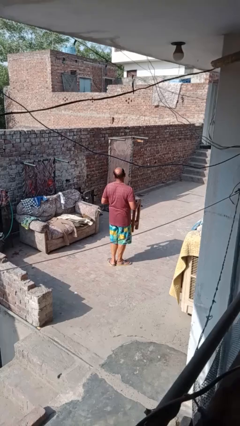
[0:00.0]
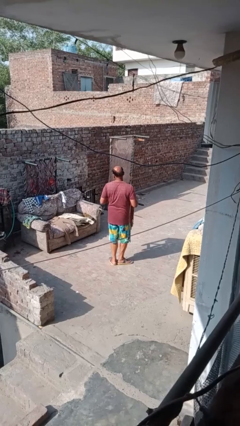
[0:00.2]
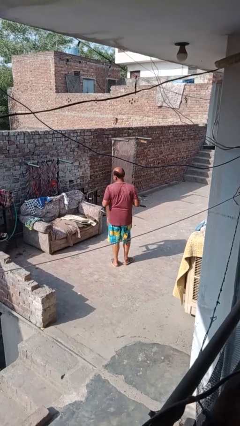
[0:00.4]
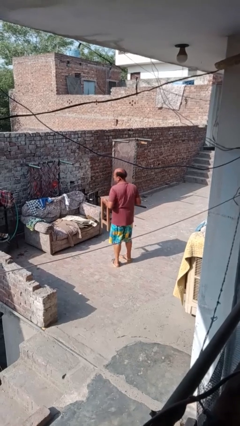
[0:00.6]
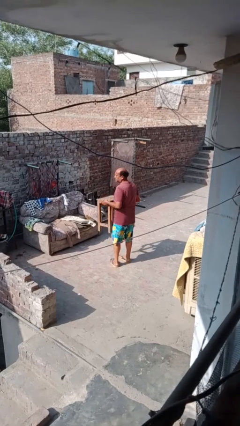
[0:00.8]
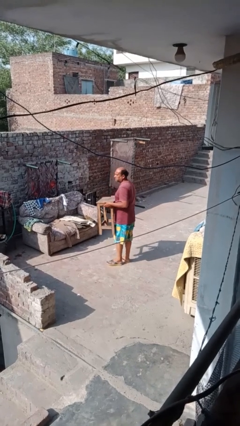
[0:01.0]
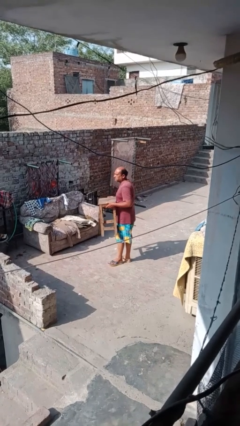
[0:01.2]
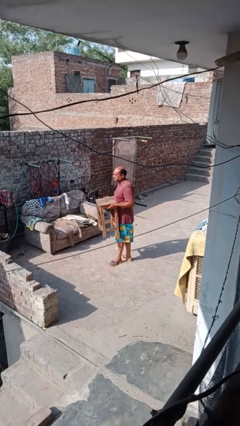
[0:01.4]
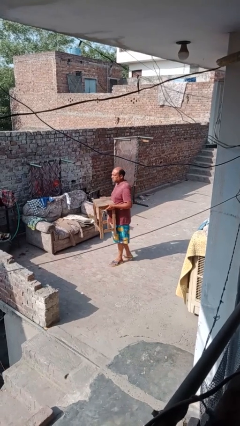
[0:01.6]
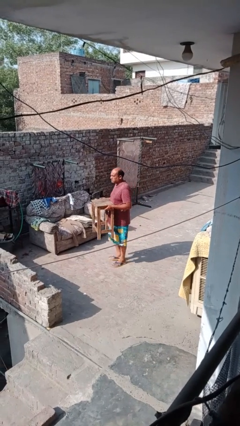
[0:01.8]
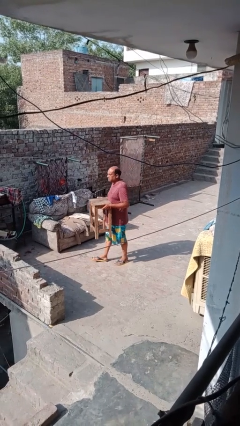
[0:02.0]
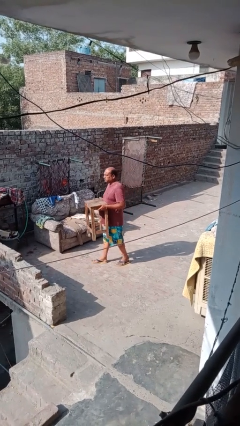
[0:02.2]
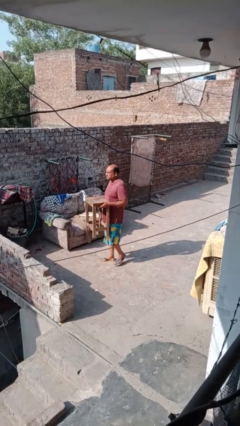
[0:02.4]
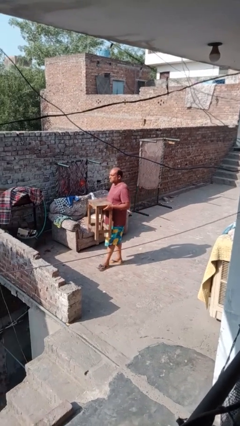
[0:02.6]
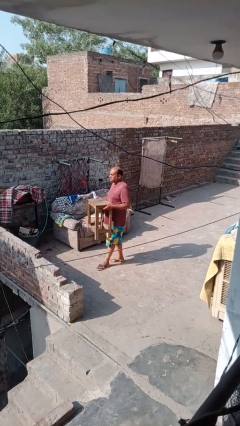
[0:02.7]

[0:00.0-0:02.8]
person carries furniture

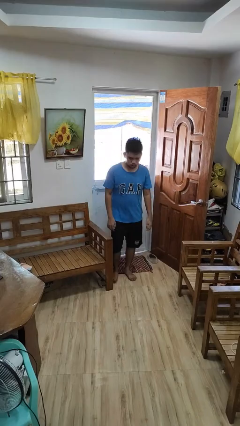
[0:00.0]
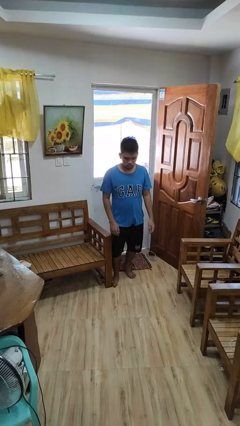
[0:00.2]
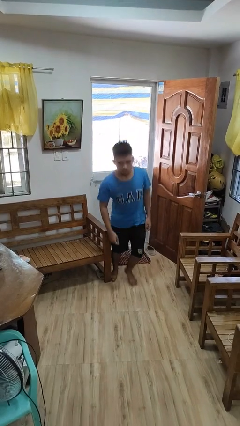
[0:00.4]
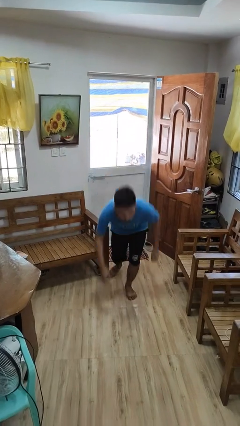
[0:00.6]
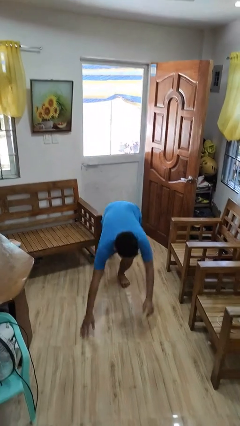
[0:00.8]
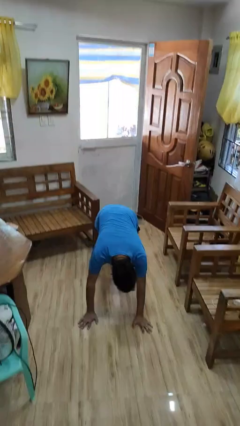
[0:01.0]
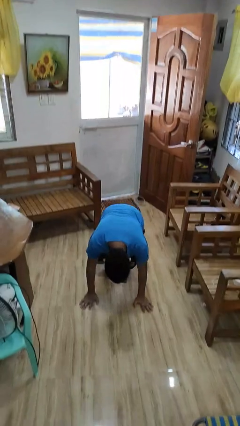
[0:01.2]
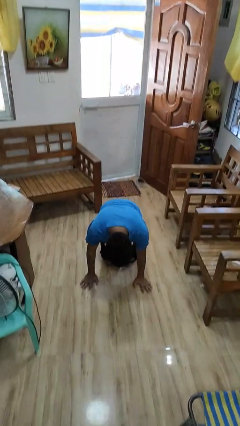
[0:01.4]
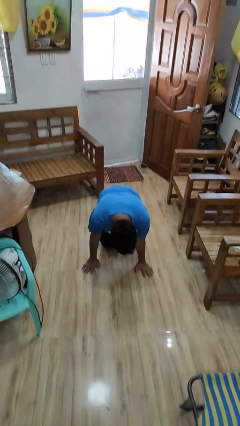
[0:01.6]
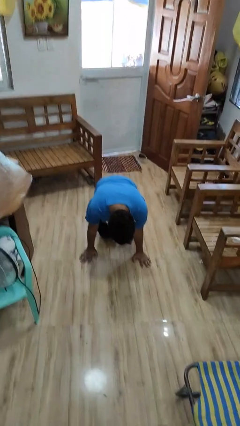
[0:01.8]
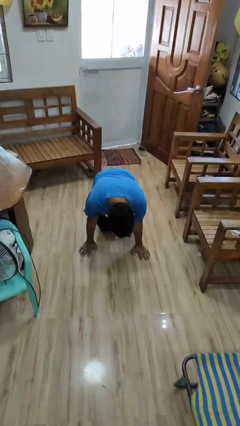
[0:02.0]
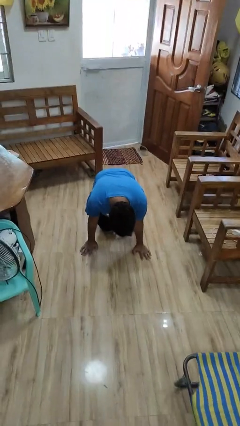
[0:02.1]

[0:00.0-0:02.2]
person trips on object on floor

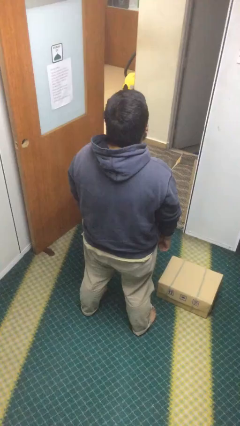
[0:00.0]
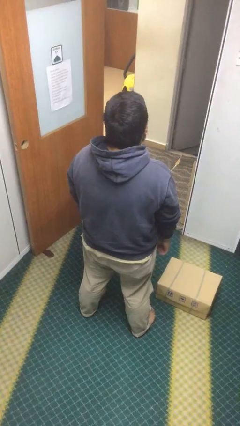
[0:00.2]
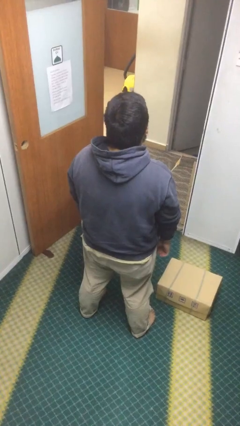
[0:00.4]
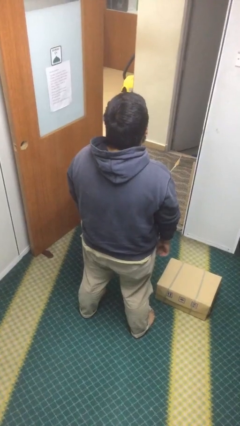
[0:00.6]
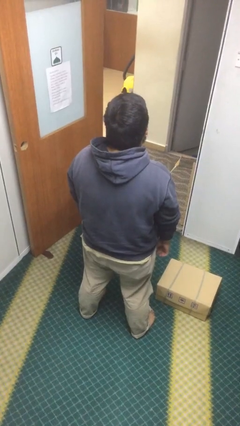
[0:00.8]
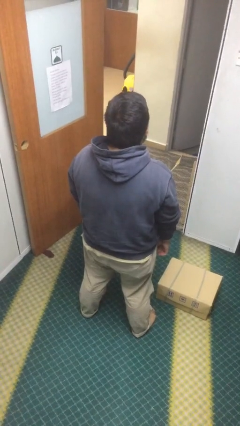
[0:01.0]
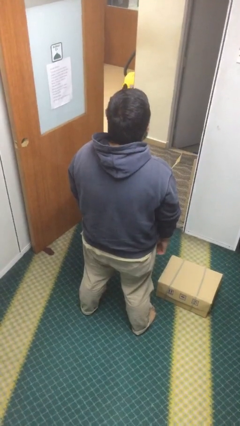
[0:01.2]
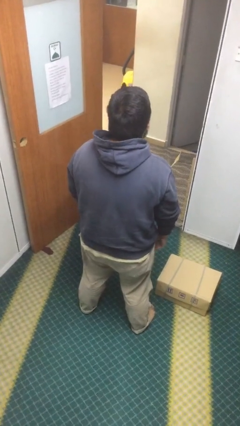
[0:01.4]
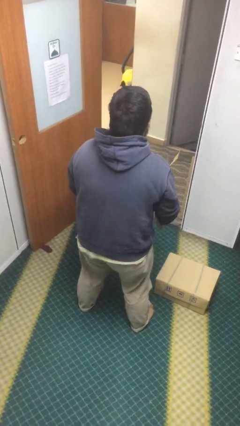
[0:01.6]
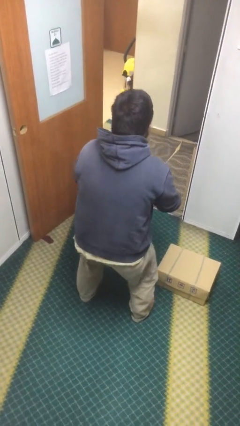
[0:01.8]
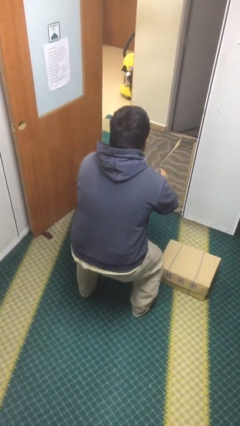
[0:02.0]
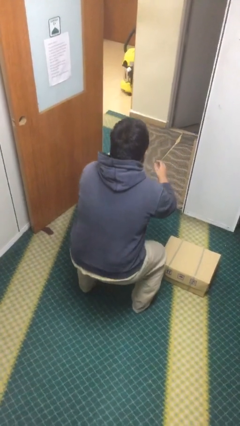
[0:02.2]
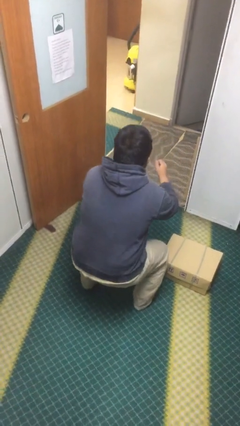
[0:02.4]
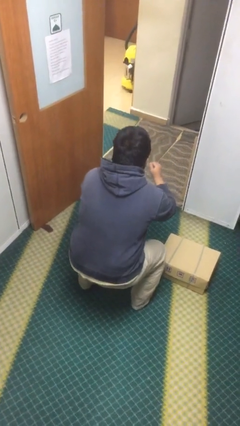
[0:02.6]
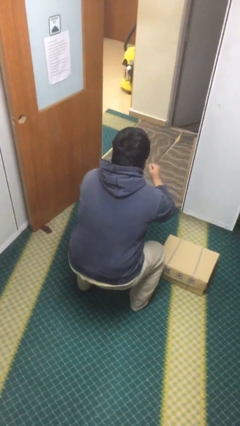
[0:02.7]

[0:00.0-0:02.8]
person squats

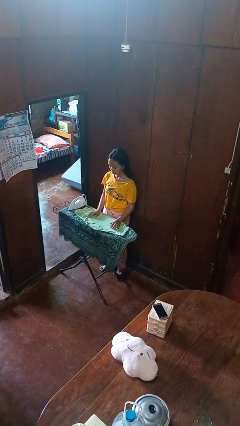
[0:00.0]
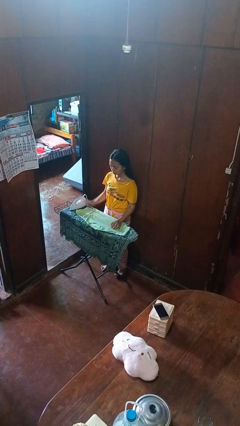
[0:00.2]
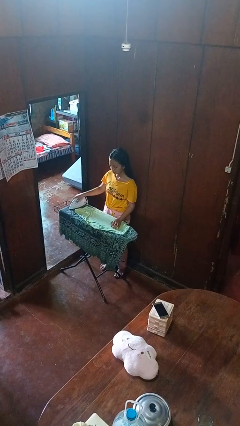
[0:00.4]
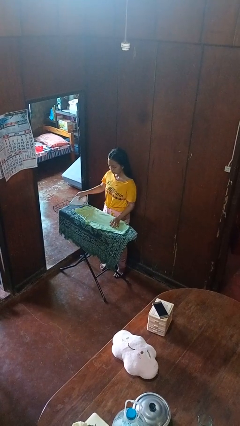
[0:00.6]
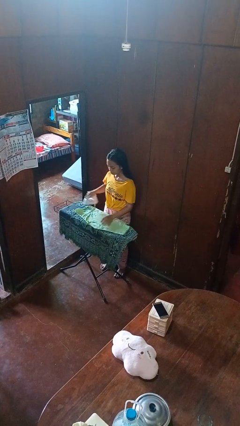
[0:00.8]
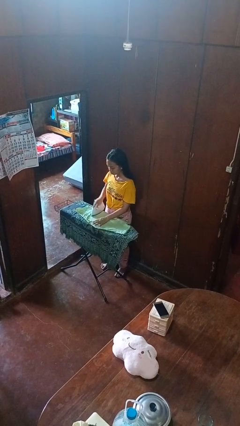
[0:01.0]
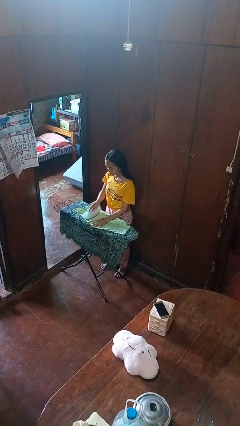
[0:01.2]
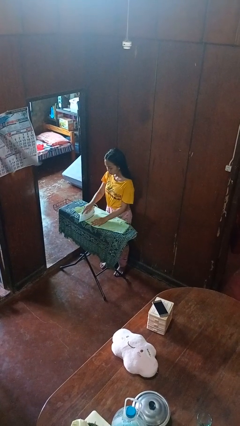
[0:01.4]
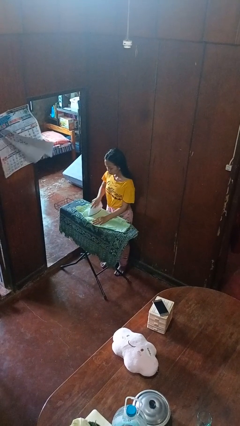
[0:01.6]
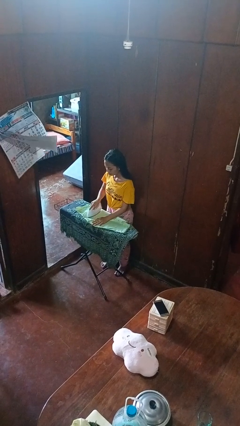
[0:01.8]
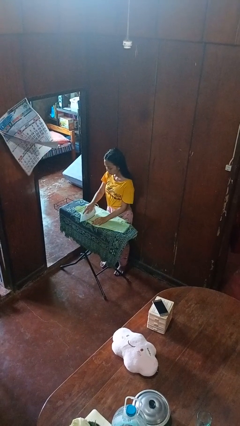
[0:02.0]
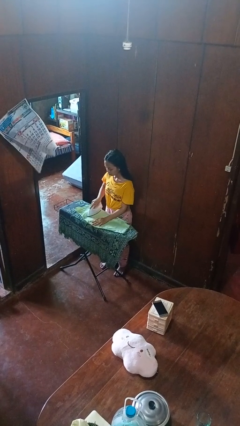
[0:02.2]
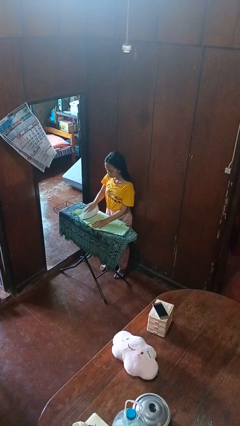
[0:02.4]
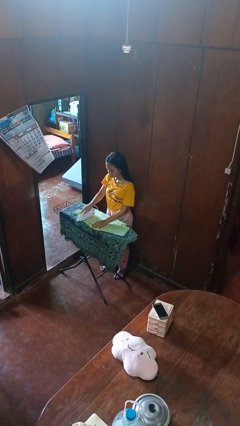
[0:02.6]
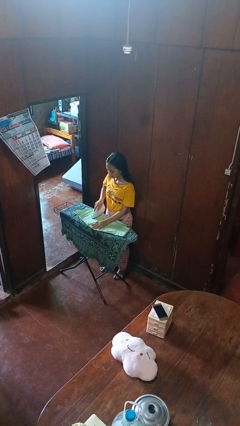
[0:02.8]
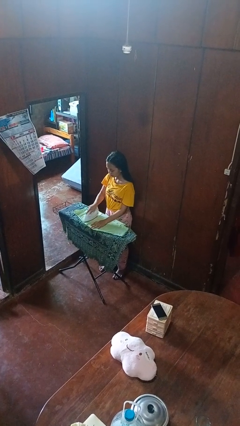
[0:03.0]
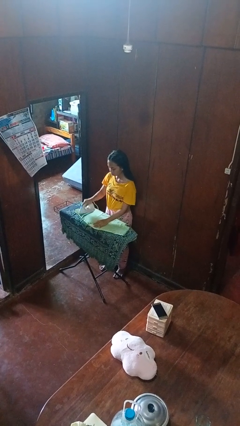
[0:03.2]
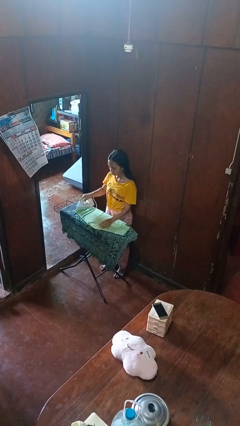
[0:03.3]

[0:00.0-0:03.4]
person irons clothes

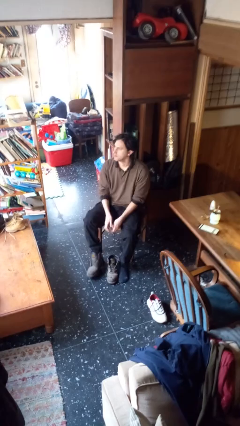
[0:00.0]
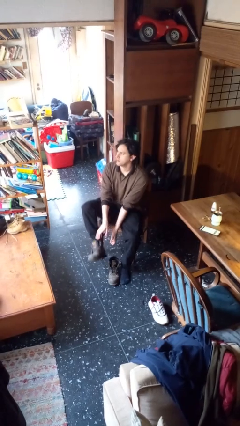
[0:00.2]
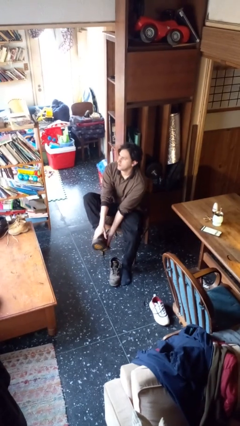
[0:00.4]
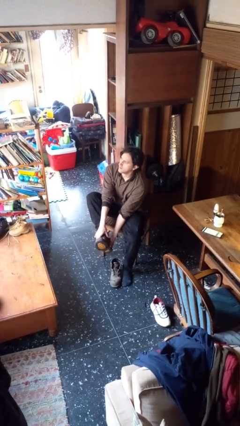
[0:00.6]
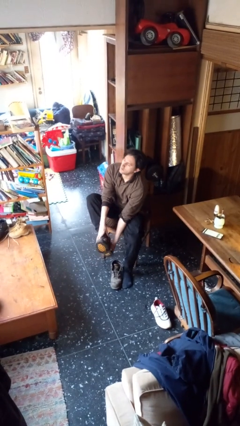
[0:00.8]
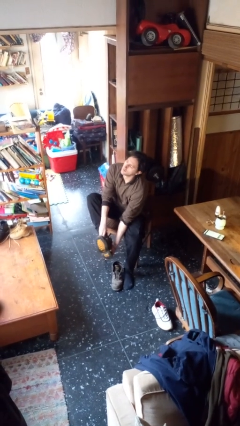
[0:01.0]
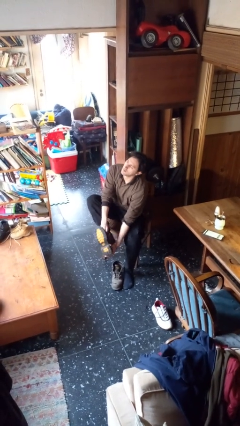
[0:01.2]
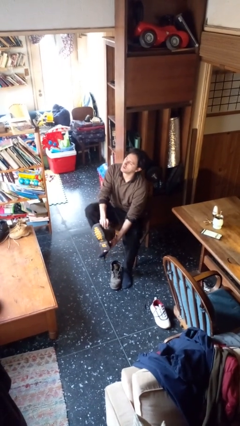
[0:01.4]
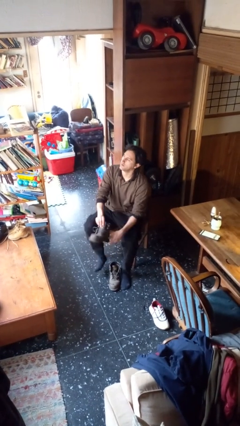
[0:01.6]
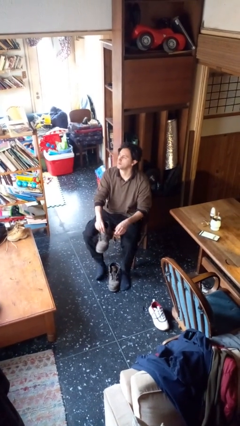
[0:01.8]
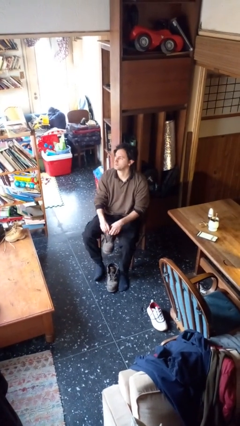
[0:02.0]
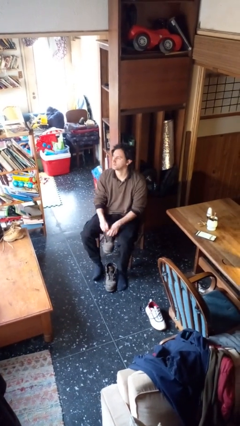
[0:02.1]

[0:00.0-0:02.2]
person takes off boots

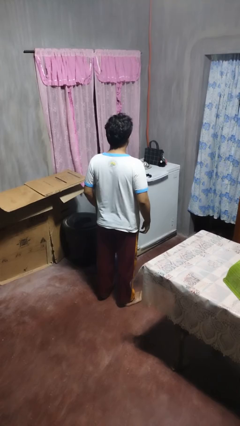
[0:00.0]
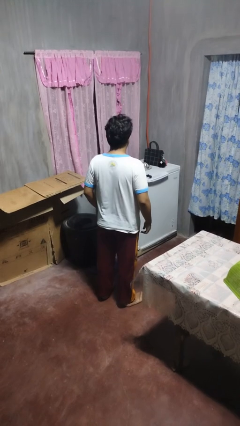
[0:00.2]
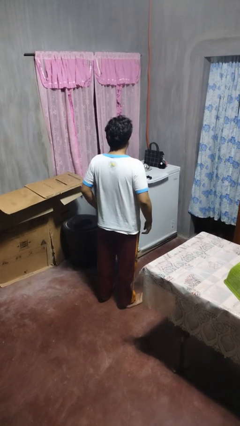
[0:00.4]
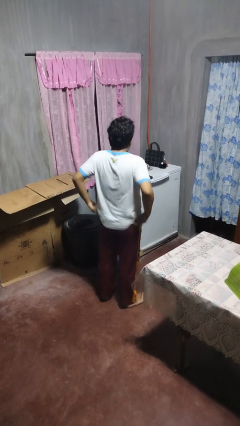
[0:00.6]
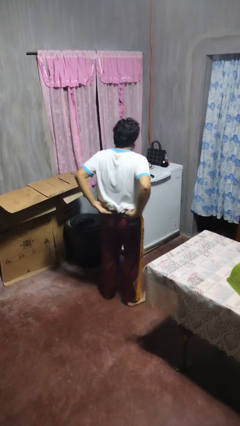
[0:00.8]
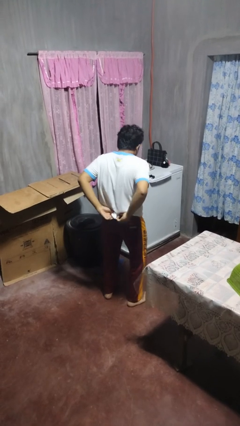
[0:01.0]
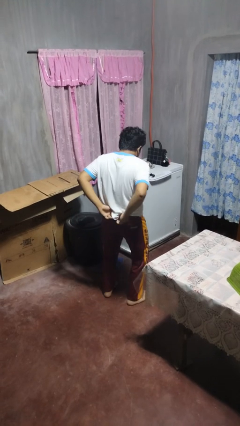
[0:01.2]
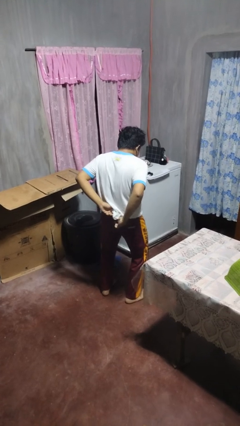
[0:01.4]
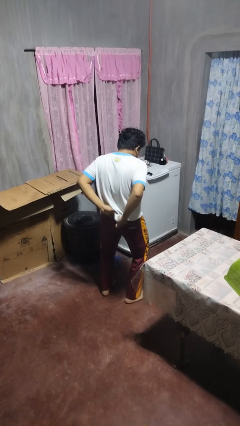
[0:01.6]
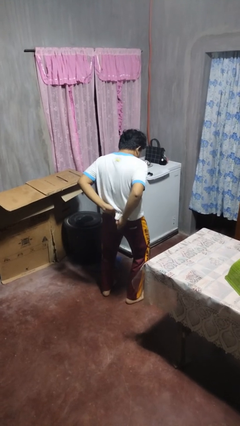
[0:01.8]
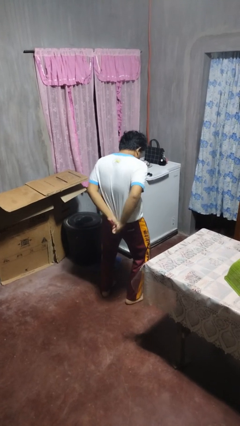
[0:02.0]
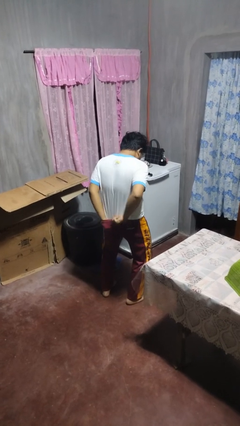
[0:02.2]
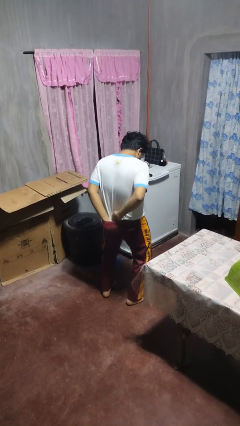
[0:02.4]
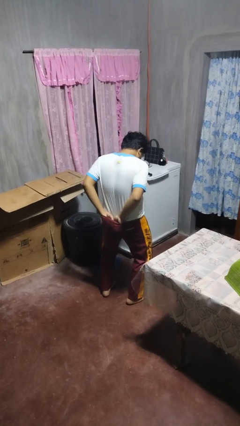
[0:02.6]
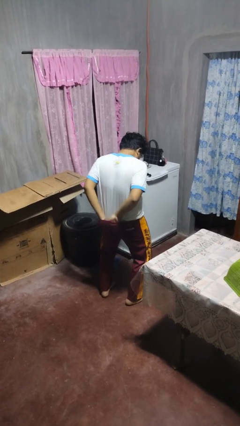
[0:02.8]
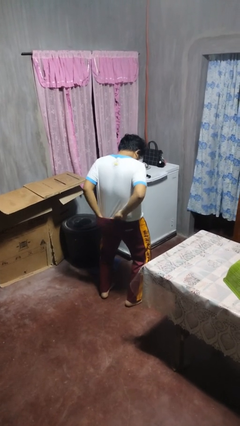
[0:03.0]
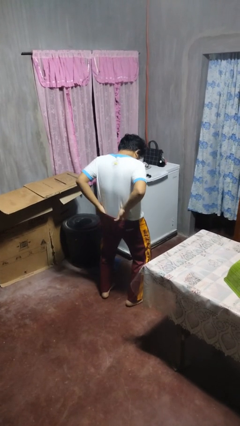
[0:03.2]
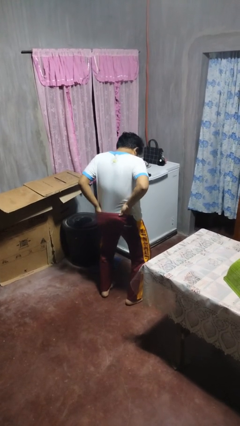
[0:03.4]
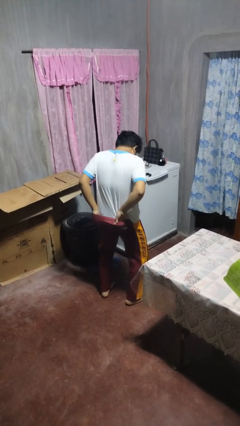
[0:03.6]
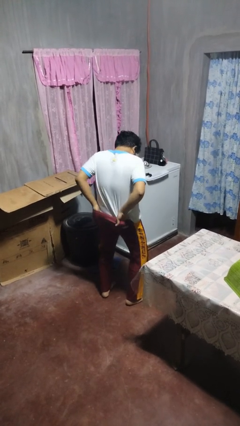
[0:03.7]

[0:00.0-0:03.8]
person tucks in shirt

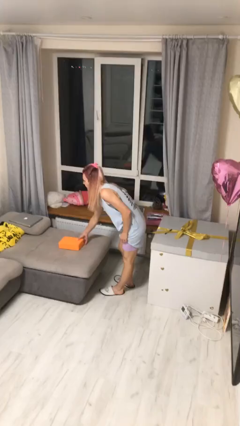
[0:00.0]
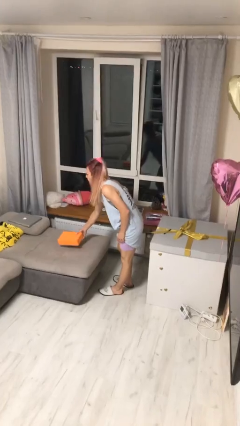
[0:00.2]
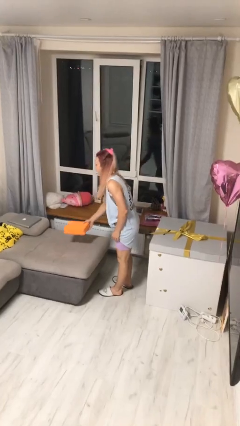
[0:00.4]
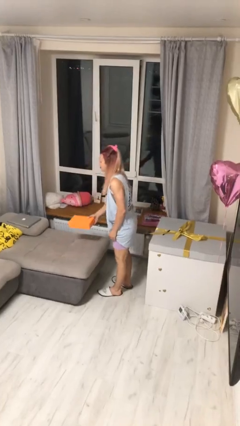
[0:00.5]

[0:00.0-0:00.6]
person picks up object from couch
